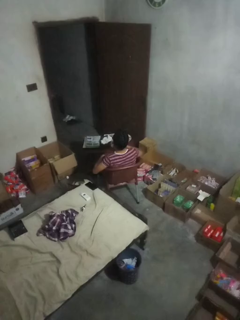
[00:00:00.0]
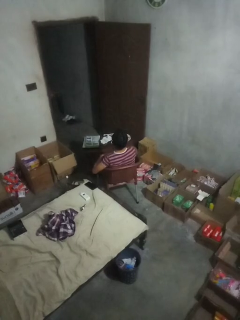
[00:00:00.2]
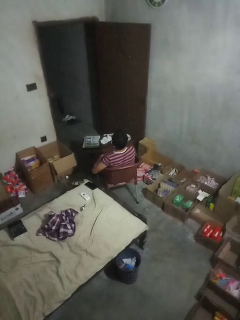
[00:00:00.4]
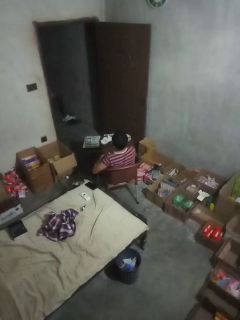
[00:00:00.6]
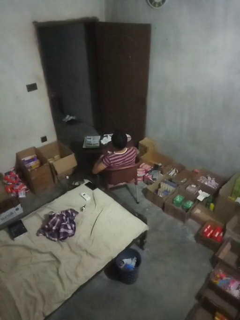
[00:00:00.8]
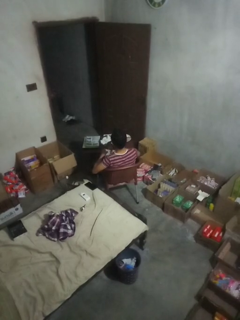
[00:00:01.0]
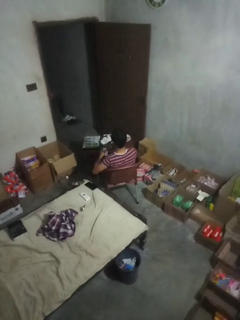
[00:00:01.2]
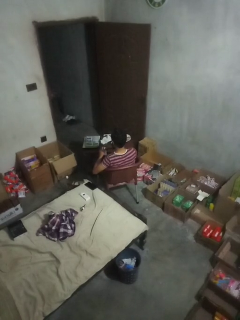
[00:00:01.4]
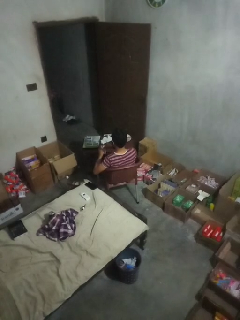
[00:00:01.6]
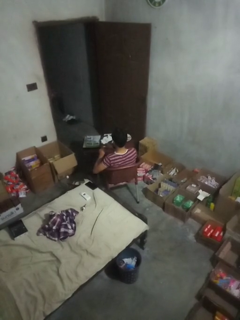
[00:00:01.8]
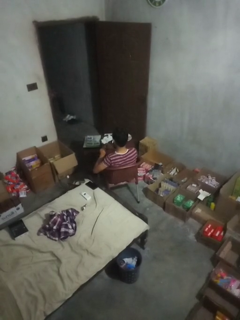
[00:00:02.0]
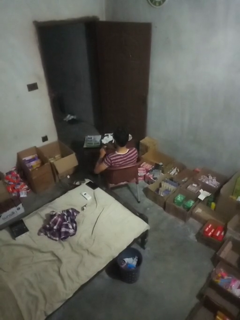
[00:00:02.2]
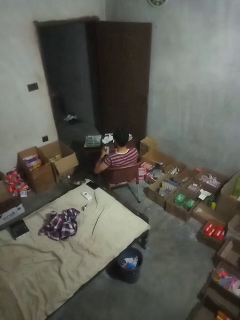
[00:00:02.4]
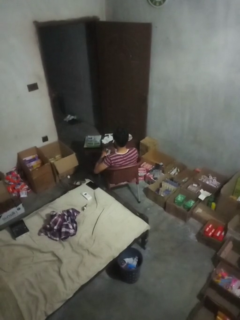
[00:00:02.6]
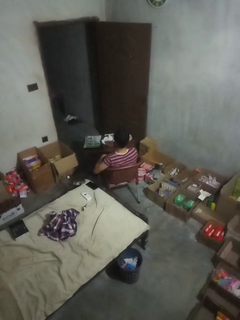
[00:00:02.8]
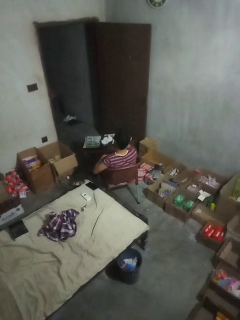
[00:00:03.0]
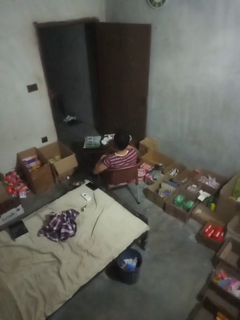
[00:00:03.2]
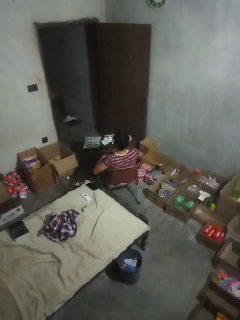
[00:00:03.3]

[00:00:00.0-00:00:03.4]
person takes medicine pills

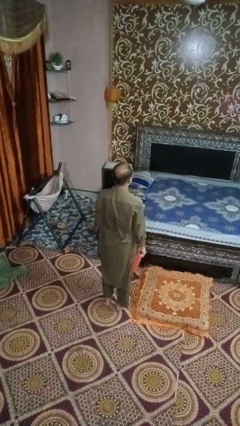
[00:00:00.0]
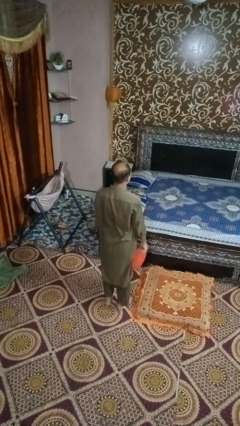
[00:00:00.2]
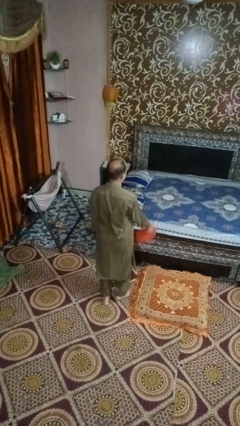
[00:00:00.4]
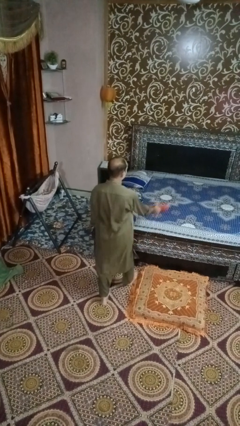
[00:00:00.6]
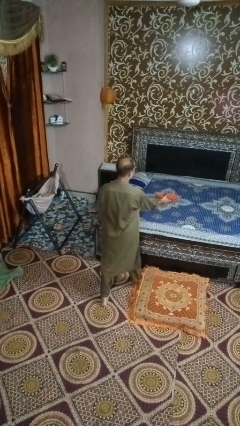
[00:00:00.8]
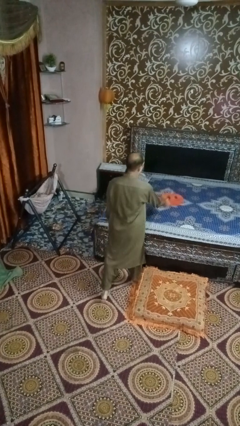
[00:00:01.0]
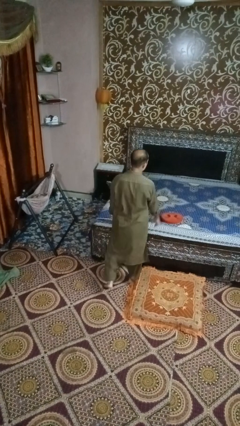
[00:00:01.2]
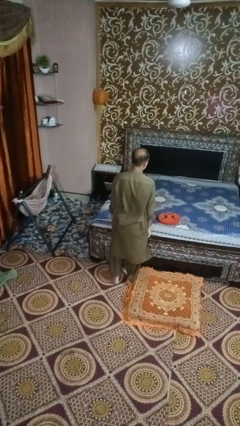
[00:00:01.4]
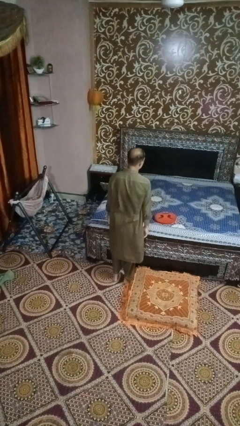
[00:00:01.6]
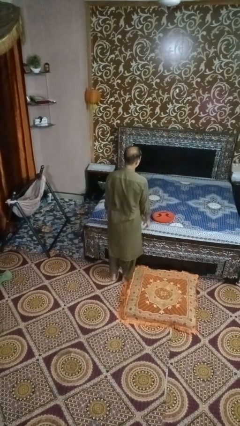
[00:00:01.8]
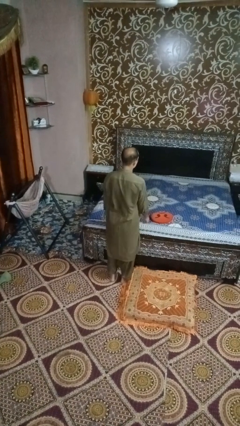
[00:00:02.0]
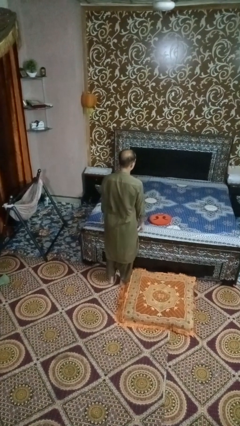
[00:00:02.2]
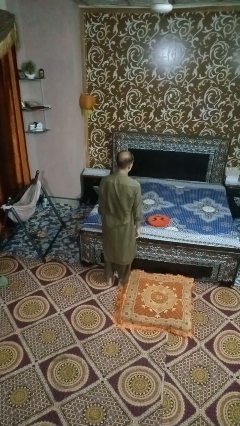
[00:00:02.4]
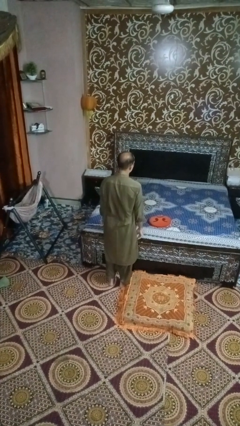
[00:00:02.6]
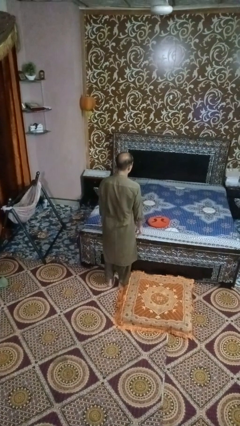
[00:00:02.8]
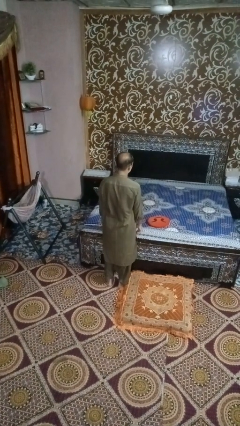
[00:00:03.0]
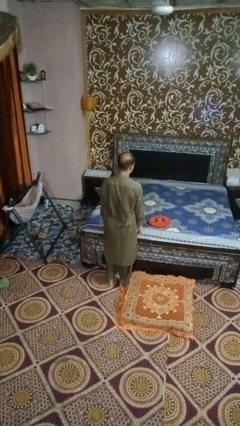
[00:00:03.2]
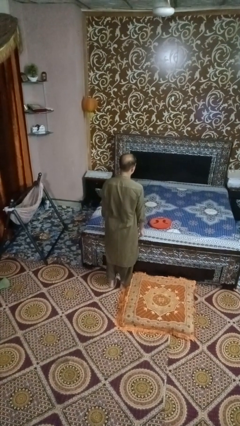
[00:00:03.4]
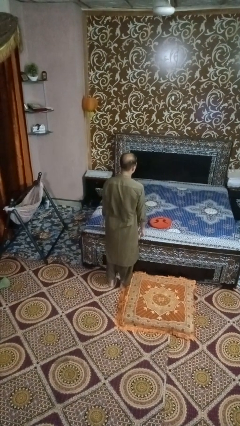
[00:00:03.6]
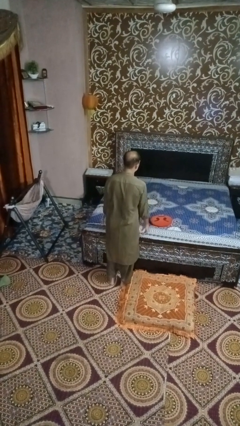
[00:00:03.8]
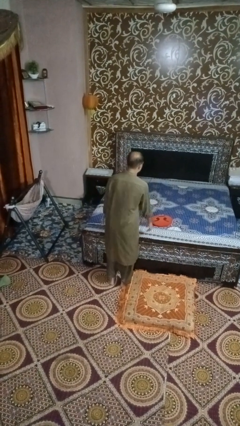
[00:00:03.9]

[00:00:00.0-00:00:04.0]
person throws object on bed

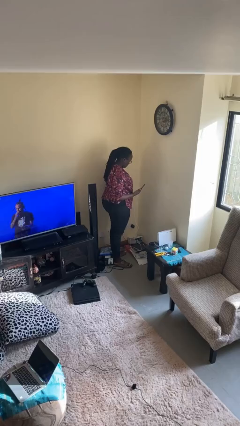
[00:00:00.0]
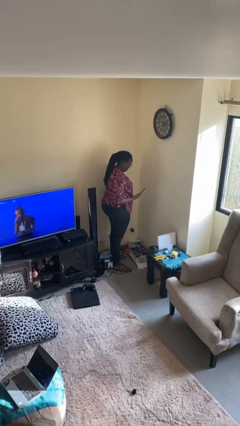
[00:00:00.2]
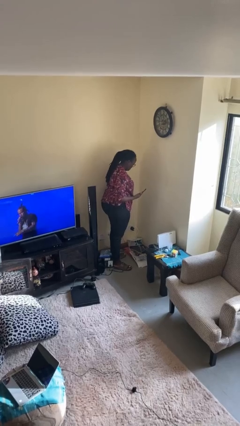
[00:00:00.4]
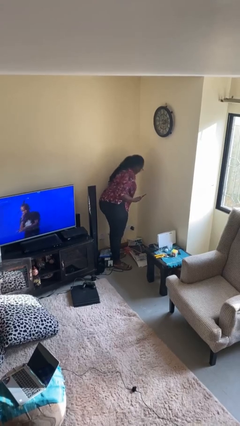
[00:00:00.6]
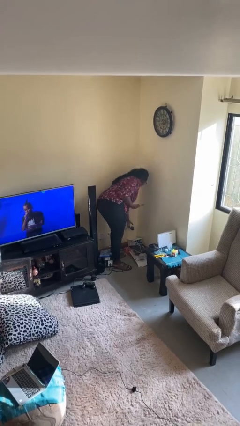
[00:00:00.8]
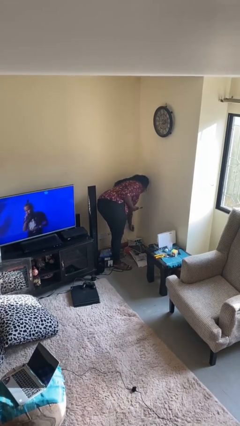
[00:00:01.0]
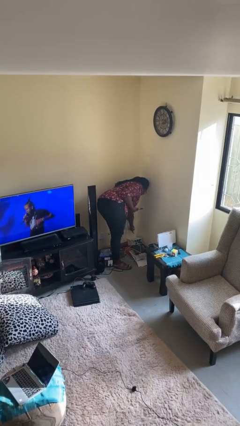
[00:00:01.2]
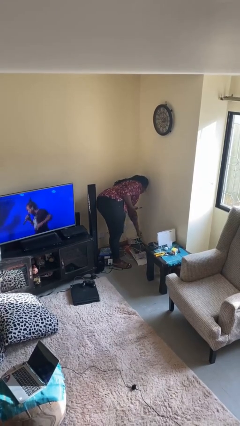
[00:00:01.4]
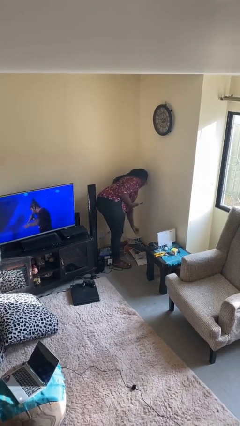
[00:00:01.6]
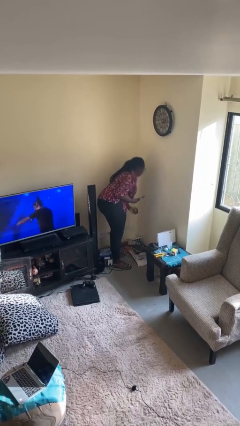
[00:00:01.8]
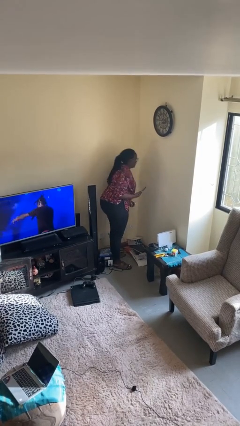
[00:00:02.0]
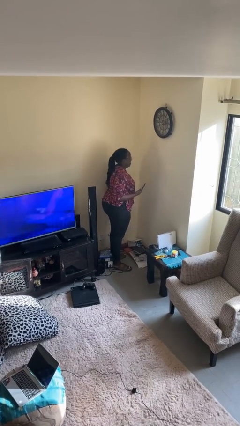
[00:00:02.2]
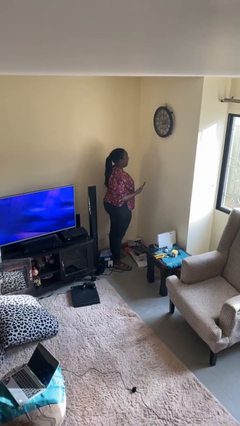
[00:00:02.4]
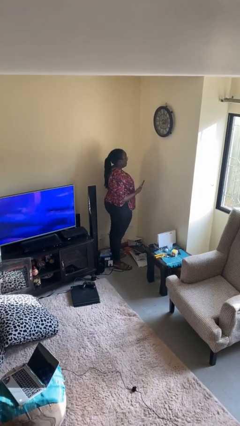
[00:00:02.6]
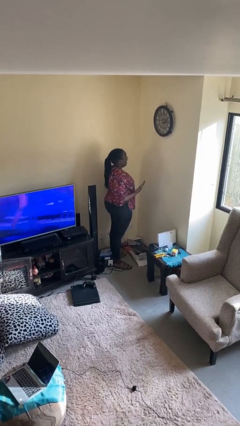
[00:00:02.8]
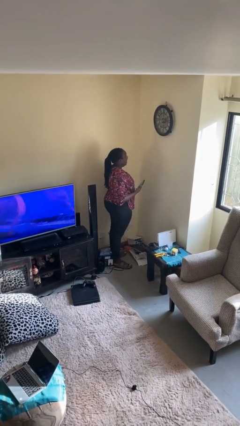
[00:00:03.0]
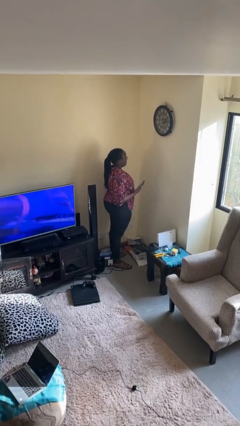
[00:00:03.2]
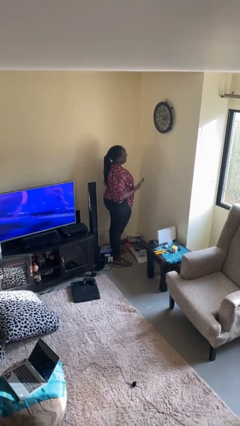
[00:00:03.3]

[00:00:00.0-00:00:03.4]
person unplugs from electrical socket

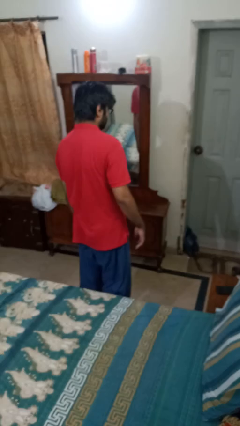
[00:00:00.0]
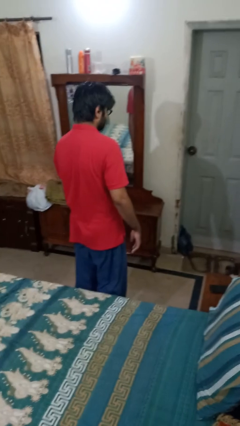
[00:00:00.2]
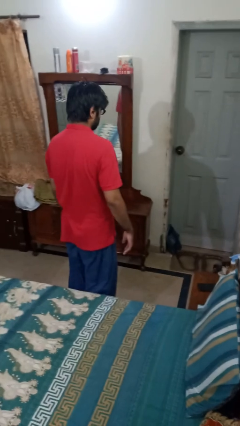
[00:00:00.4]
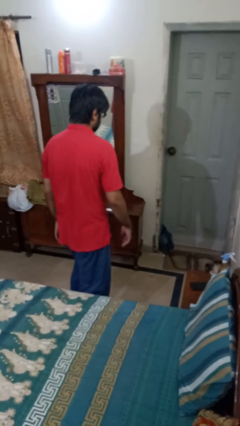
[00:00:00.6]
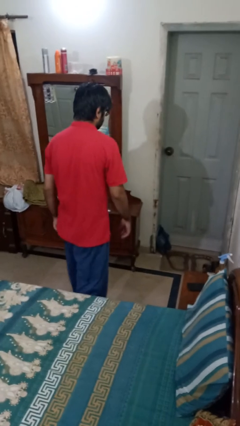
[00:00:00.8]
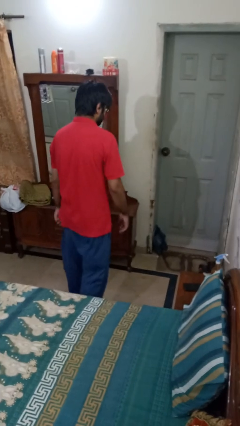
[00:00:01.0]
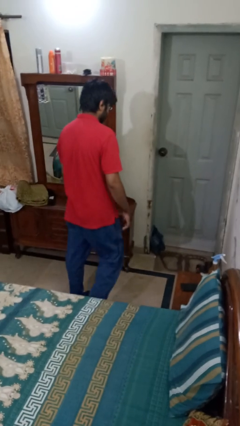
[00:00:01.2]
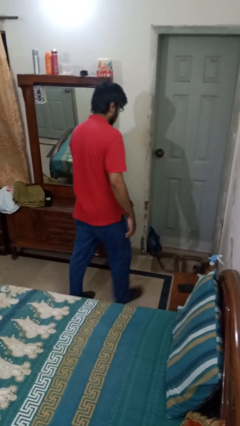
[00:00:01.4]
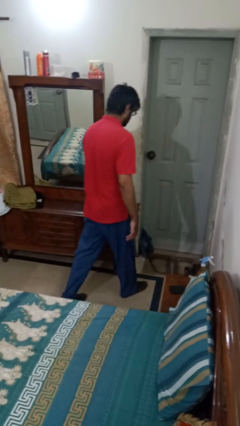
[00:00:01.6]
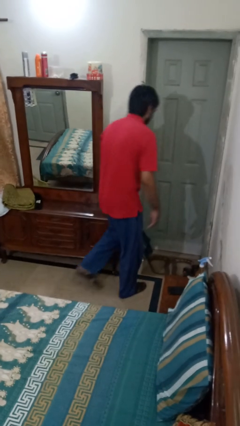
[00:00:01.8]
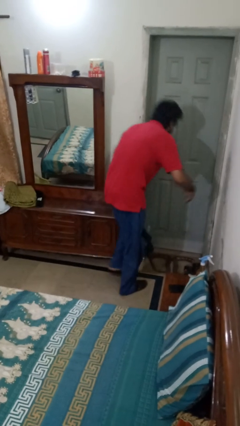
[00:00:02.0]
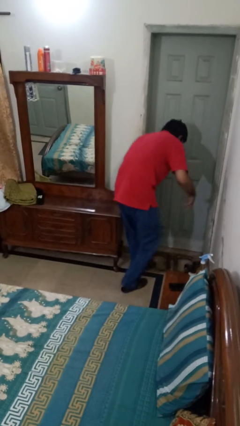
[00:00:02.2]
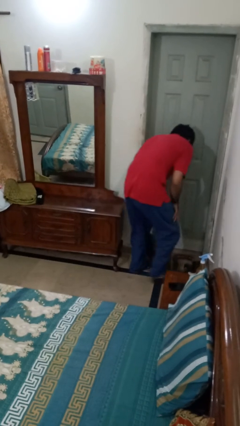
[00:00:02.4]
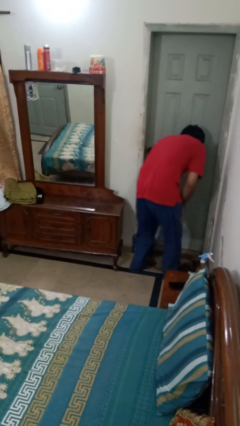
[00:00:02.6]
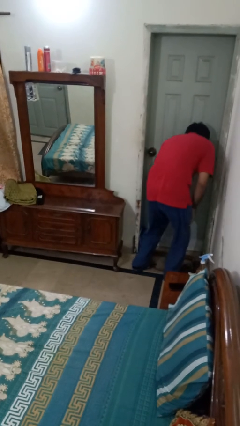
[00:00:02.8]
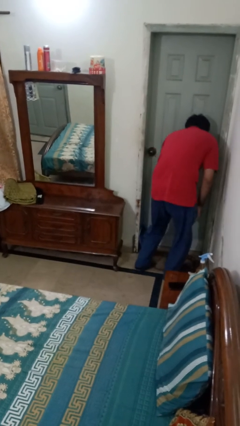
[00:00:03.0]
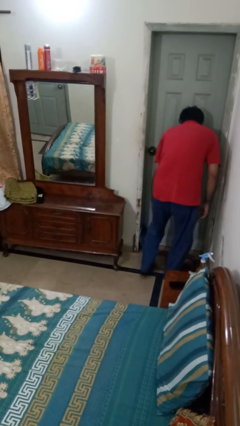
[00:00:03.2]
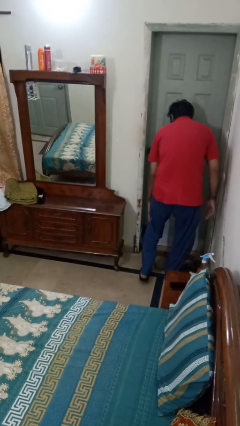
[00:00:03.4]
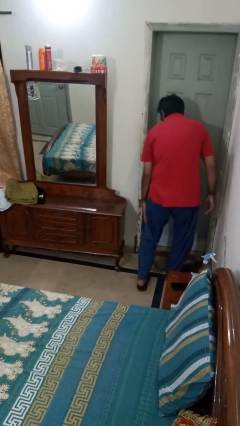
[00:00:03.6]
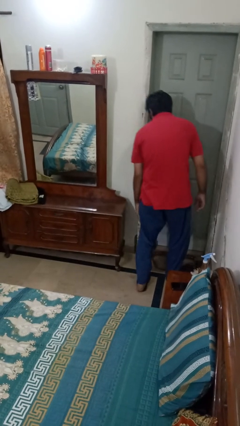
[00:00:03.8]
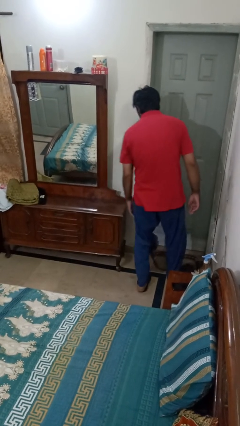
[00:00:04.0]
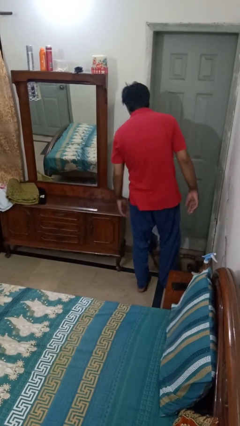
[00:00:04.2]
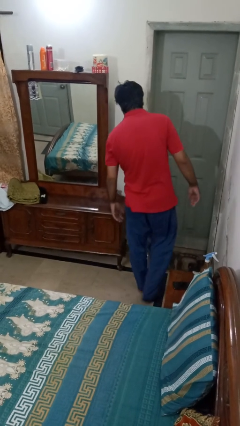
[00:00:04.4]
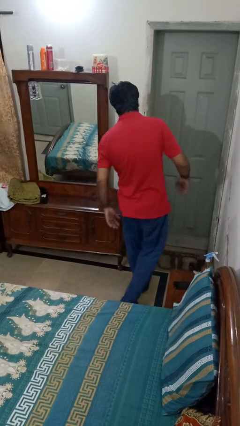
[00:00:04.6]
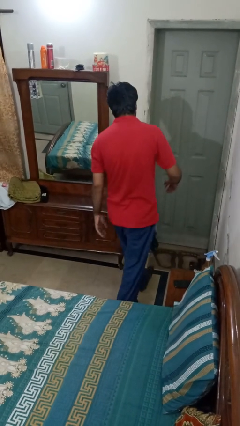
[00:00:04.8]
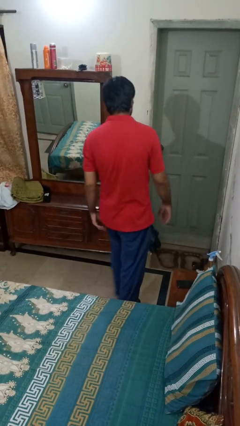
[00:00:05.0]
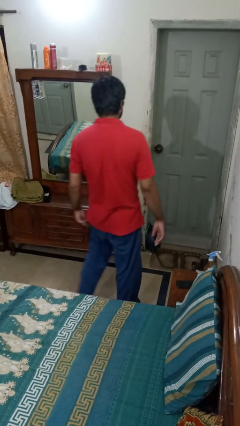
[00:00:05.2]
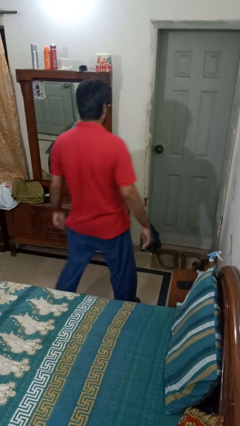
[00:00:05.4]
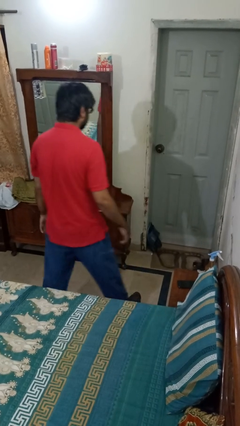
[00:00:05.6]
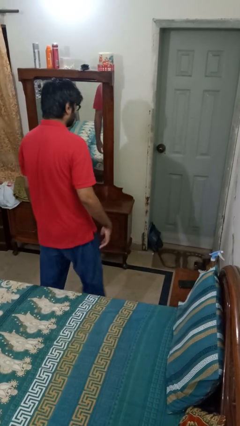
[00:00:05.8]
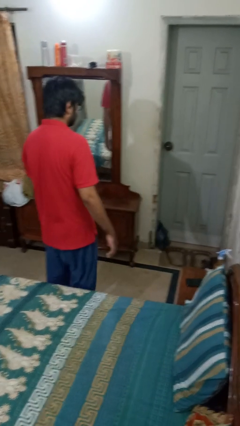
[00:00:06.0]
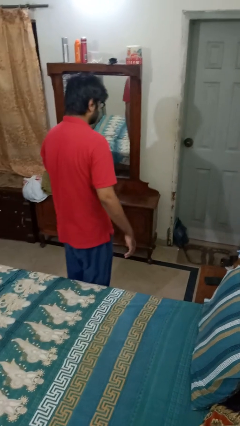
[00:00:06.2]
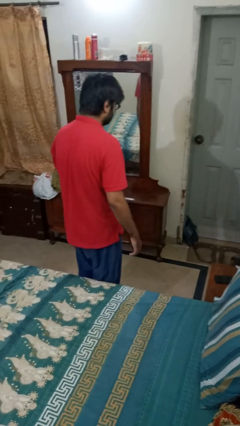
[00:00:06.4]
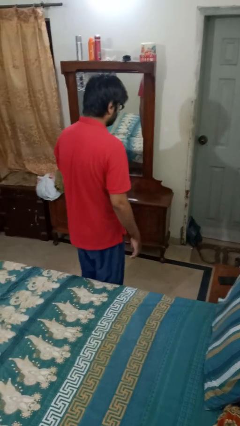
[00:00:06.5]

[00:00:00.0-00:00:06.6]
person bumps into table

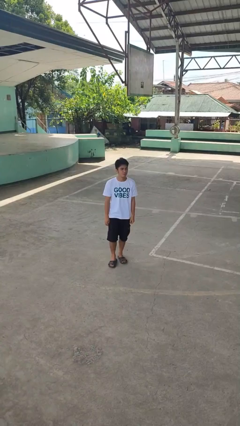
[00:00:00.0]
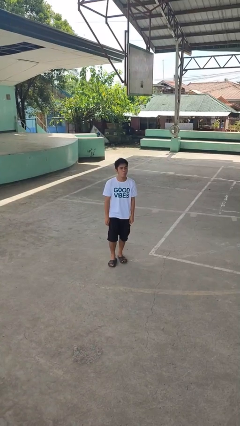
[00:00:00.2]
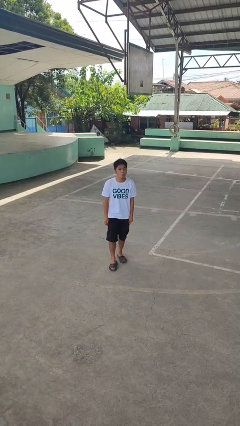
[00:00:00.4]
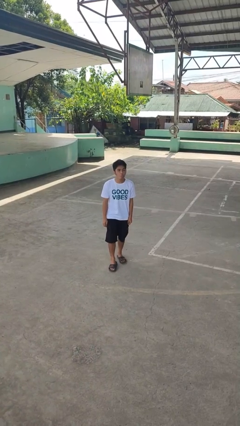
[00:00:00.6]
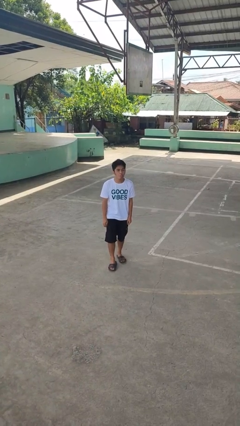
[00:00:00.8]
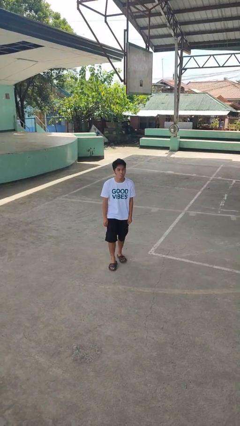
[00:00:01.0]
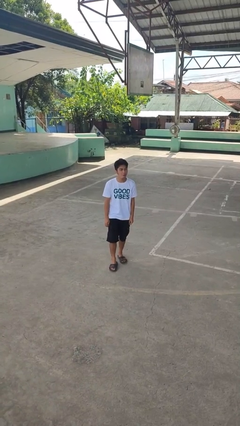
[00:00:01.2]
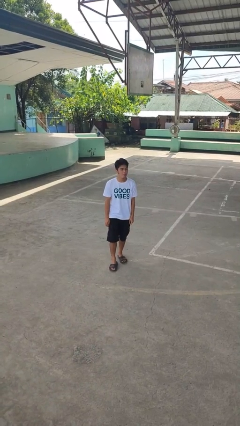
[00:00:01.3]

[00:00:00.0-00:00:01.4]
person sticks out tongue
